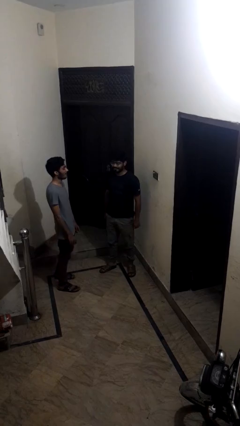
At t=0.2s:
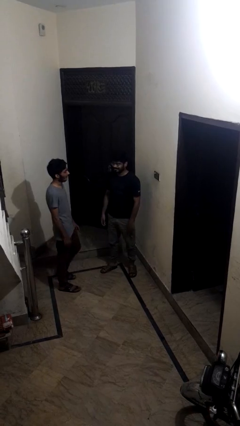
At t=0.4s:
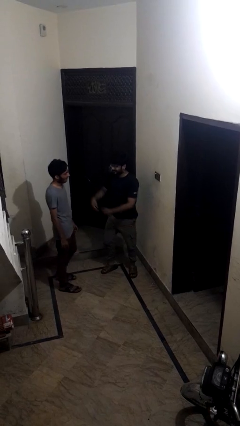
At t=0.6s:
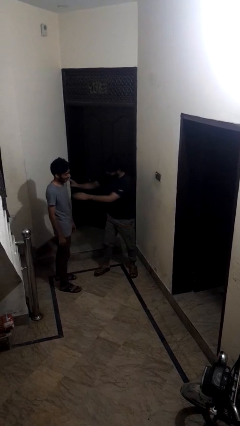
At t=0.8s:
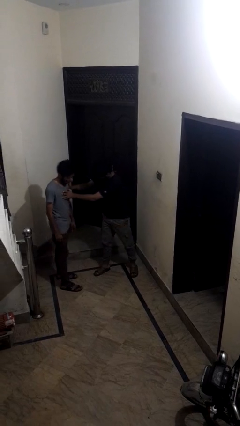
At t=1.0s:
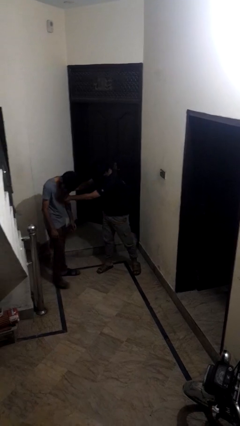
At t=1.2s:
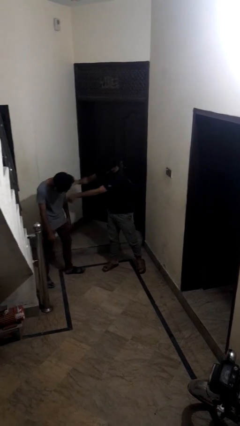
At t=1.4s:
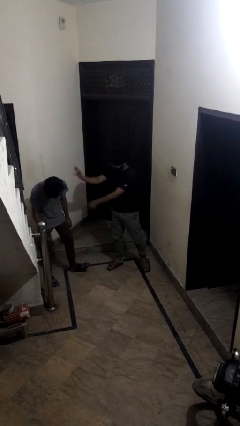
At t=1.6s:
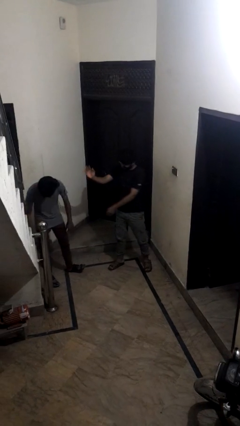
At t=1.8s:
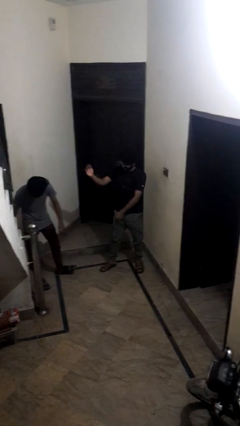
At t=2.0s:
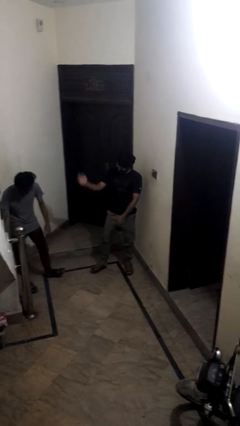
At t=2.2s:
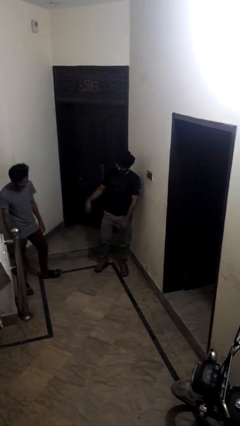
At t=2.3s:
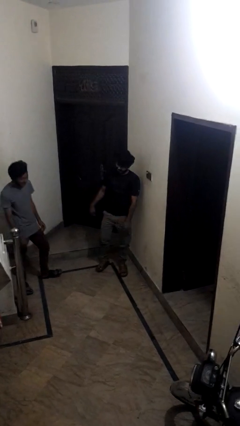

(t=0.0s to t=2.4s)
person shoves person

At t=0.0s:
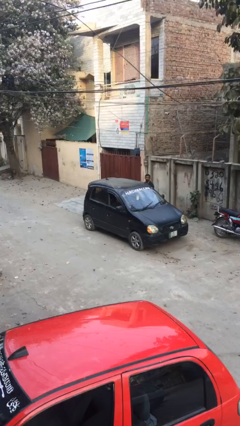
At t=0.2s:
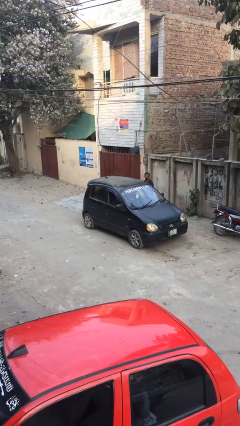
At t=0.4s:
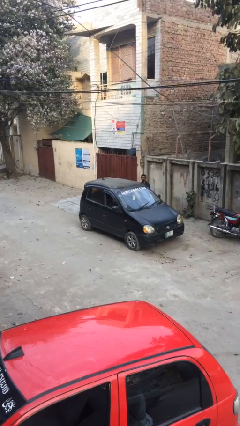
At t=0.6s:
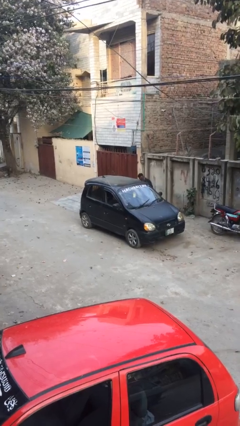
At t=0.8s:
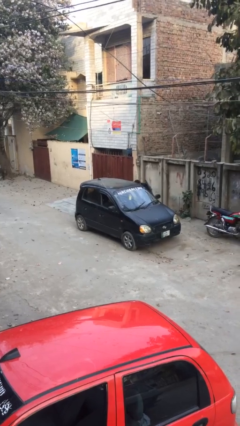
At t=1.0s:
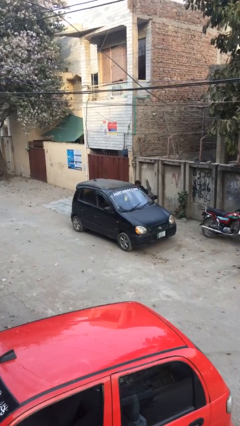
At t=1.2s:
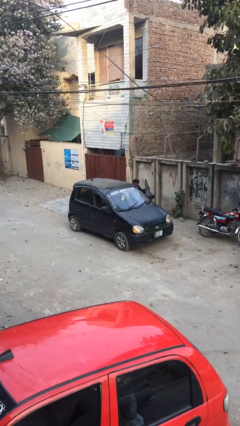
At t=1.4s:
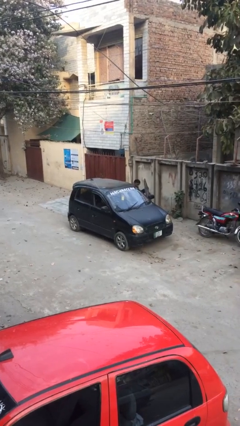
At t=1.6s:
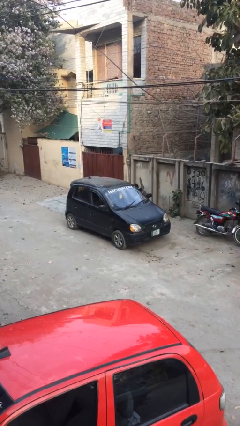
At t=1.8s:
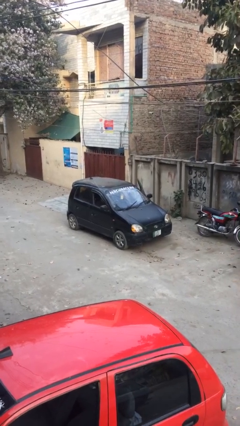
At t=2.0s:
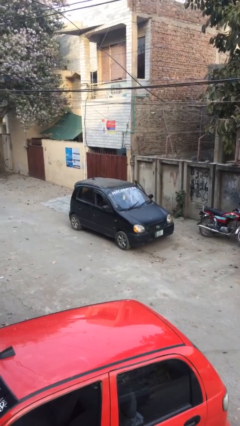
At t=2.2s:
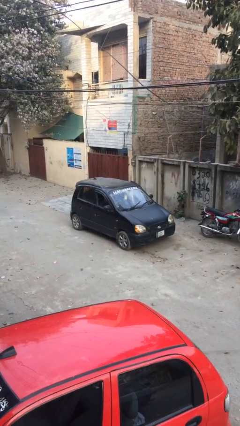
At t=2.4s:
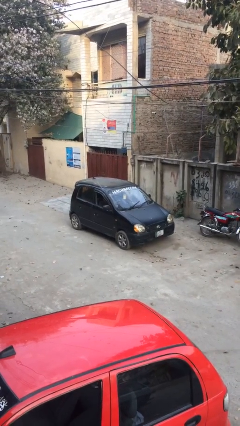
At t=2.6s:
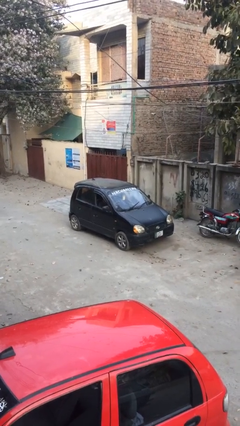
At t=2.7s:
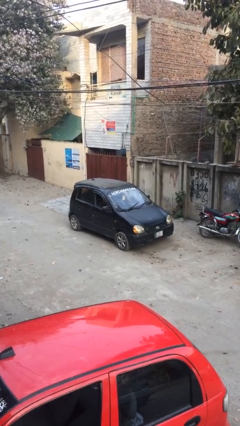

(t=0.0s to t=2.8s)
car picks up person

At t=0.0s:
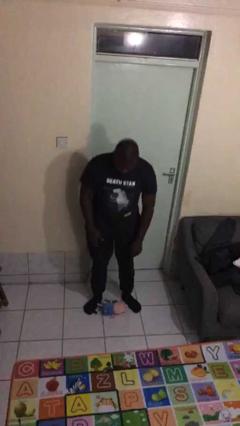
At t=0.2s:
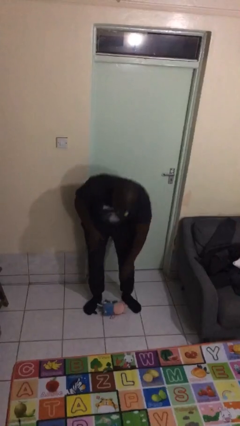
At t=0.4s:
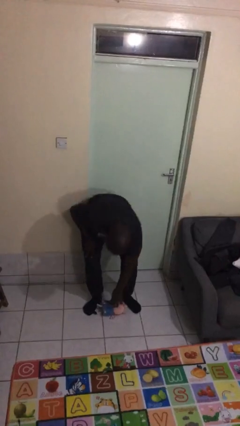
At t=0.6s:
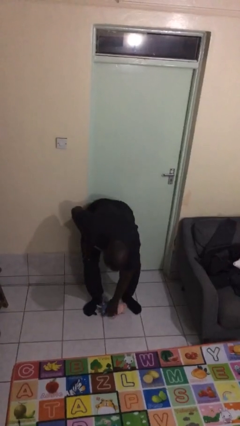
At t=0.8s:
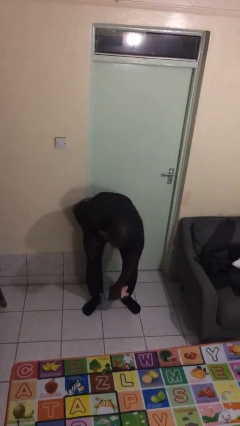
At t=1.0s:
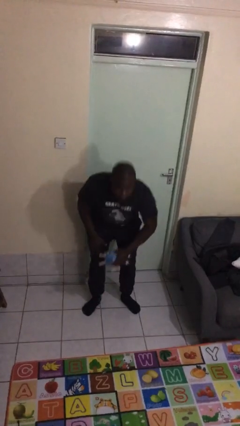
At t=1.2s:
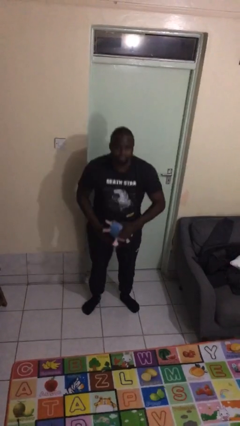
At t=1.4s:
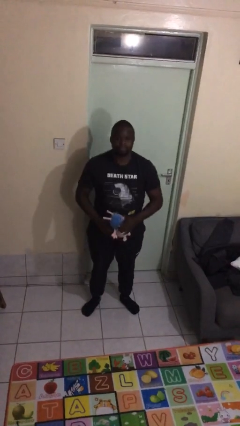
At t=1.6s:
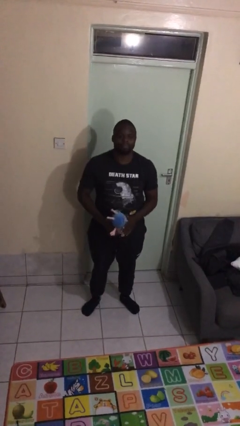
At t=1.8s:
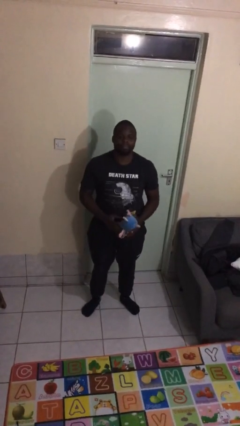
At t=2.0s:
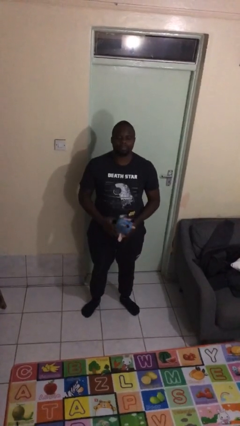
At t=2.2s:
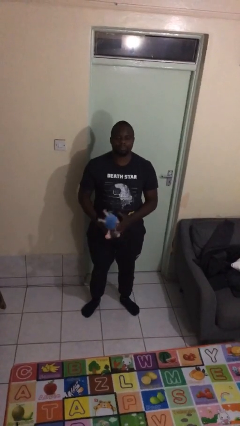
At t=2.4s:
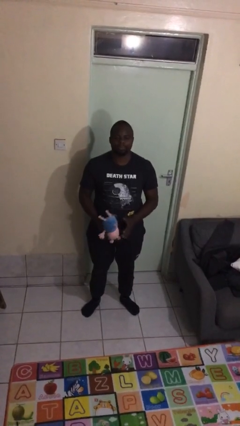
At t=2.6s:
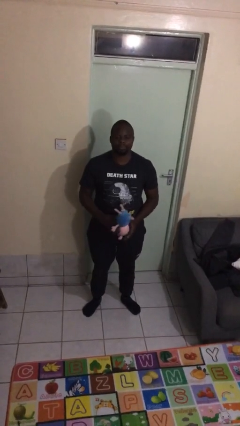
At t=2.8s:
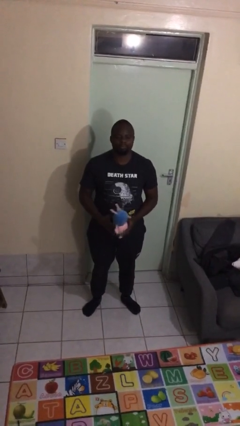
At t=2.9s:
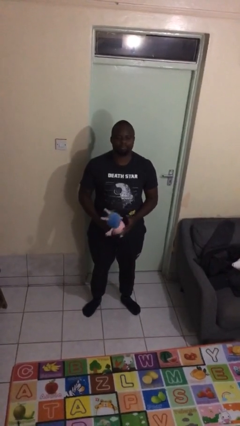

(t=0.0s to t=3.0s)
person picks up object from floor

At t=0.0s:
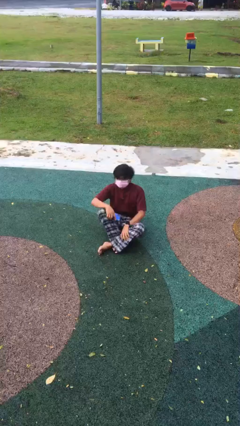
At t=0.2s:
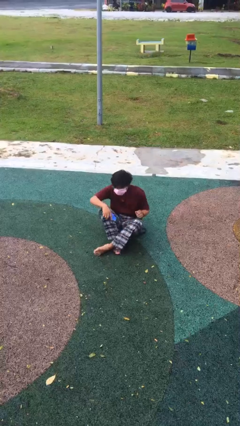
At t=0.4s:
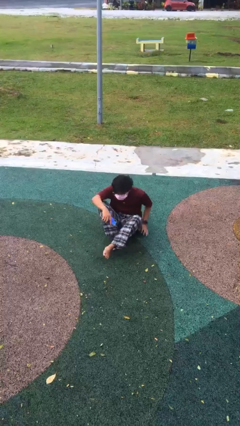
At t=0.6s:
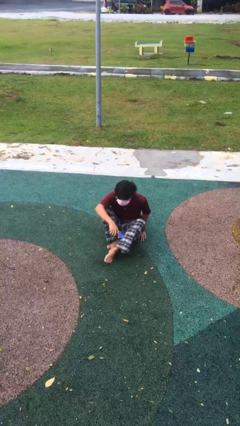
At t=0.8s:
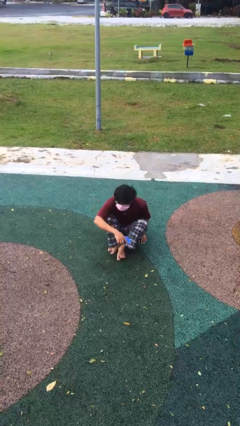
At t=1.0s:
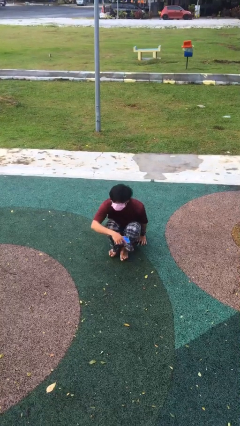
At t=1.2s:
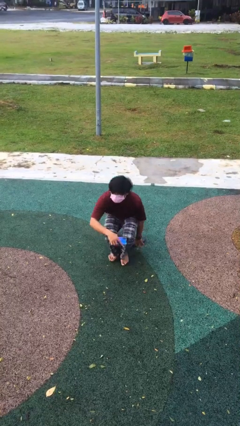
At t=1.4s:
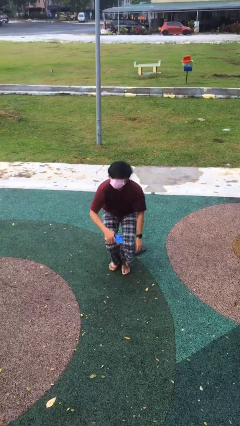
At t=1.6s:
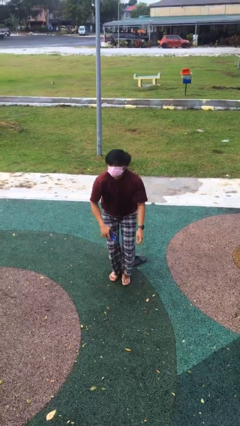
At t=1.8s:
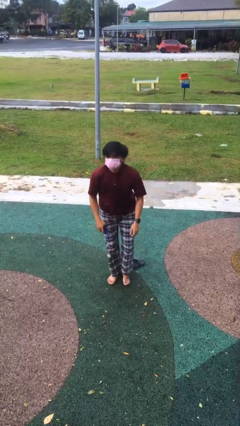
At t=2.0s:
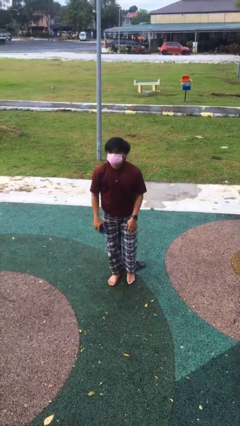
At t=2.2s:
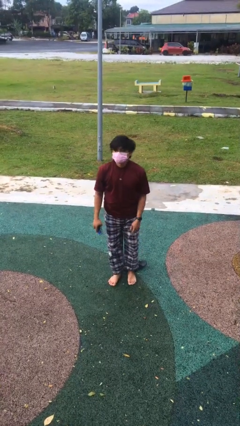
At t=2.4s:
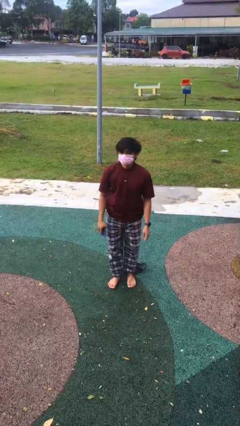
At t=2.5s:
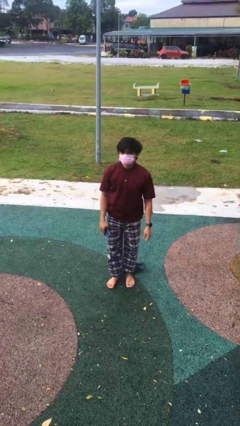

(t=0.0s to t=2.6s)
person stands up from floor

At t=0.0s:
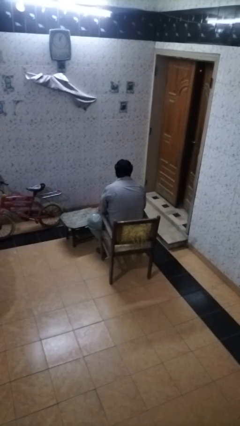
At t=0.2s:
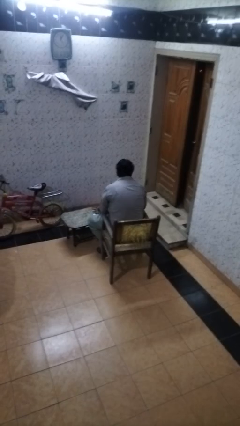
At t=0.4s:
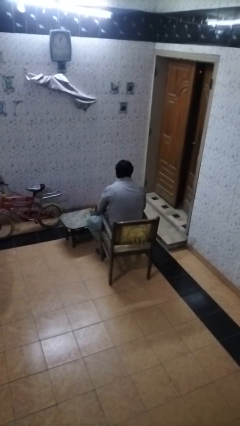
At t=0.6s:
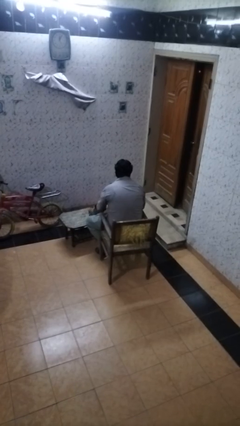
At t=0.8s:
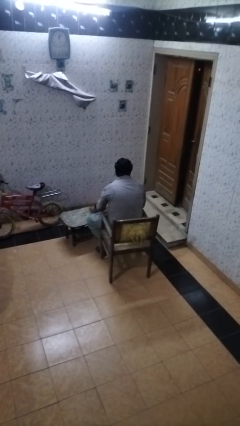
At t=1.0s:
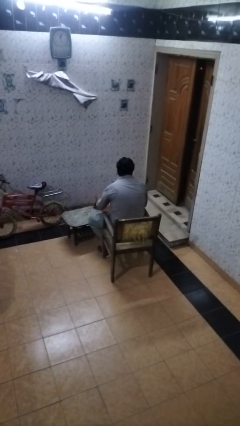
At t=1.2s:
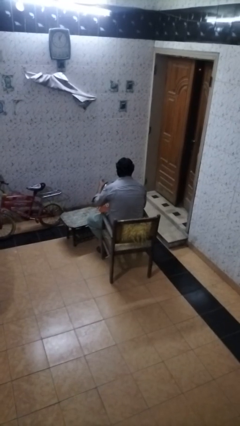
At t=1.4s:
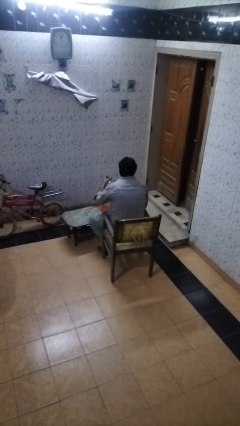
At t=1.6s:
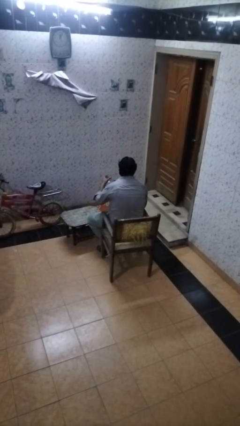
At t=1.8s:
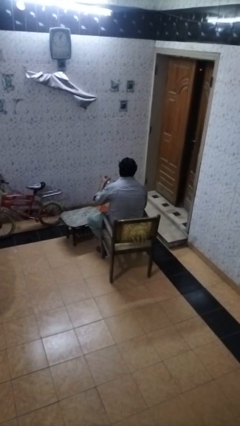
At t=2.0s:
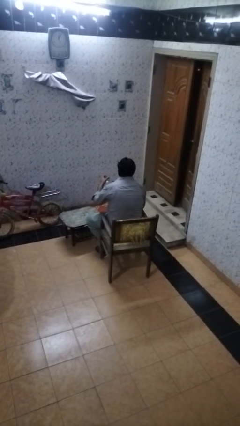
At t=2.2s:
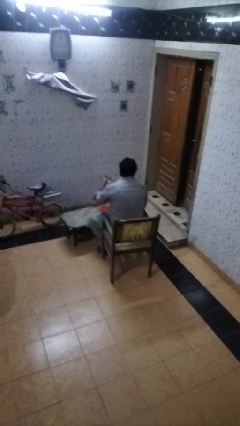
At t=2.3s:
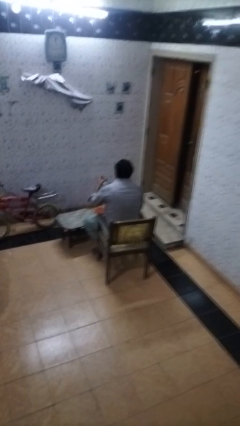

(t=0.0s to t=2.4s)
person picks up object from table

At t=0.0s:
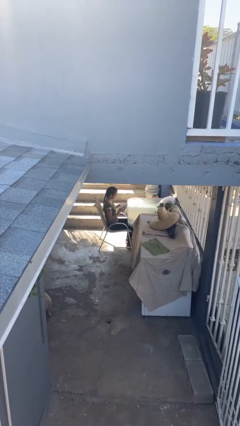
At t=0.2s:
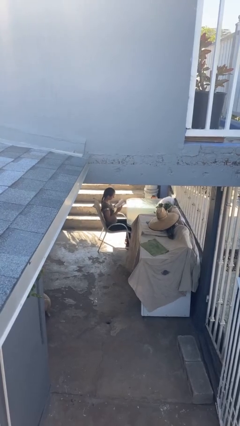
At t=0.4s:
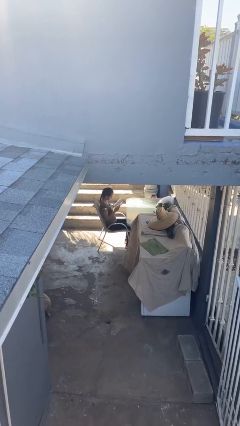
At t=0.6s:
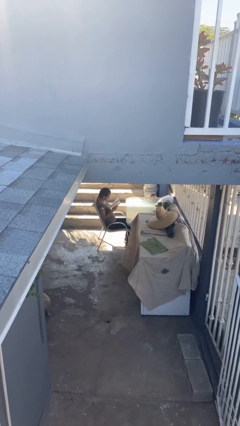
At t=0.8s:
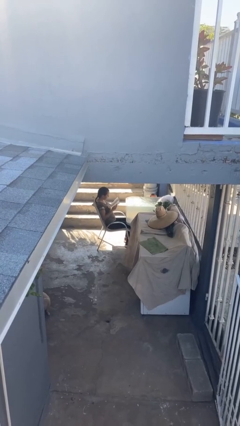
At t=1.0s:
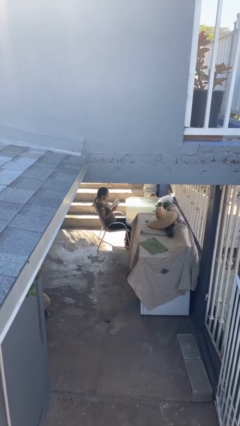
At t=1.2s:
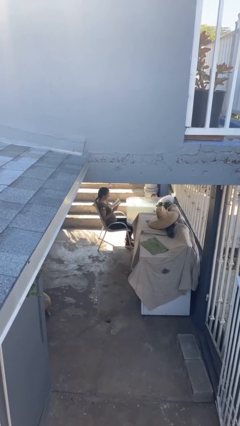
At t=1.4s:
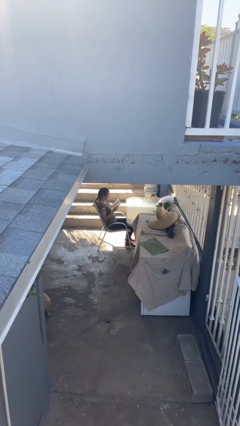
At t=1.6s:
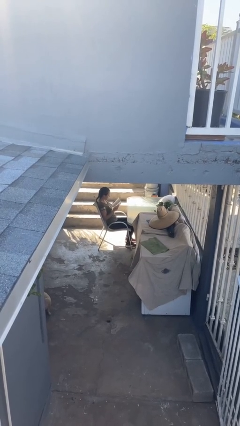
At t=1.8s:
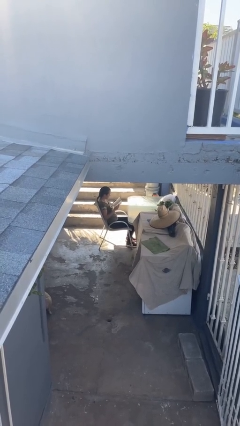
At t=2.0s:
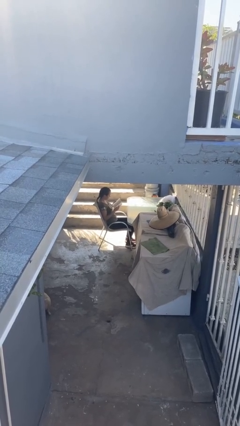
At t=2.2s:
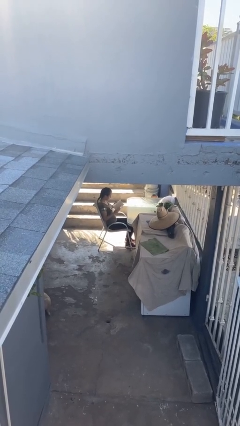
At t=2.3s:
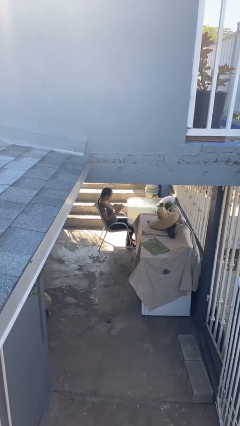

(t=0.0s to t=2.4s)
person reads document

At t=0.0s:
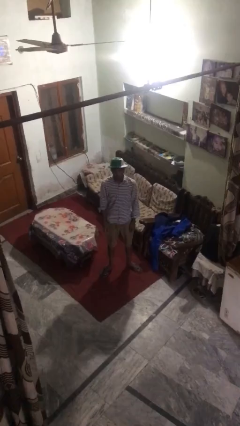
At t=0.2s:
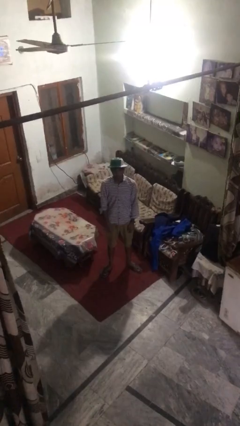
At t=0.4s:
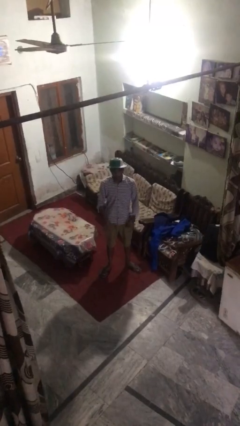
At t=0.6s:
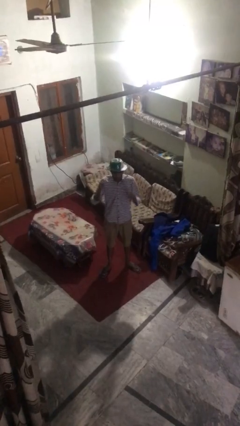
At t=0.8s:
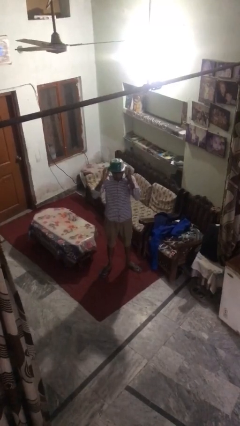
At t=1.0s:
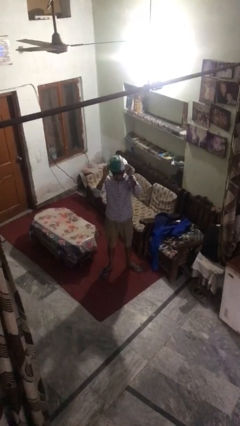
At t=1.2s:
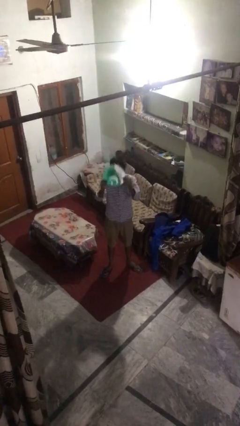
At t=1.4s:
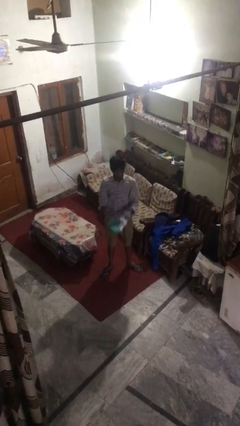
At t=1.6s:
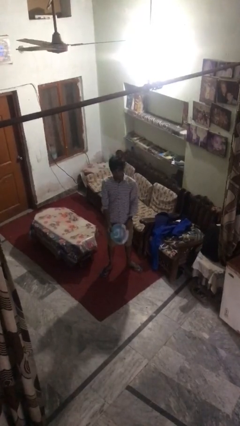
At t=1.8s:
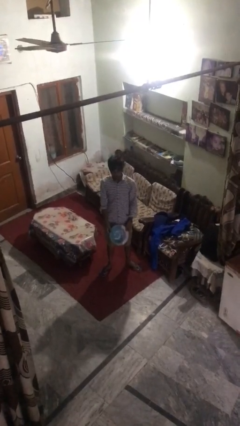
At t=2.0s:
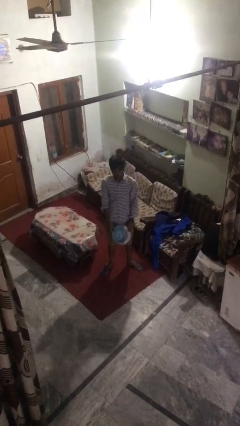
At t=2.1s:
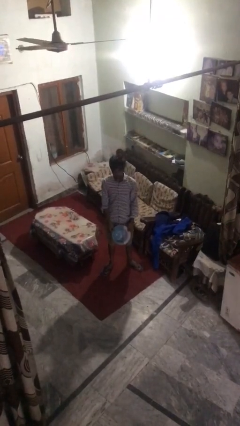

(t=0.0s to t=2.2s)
person takes off hat
